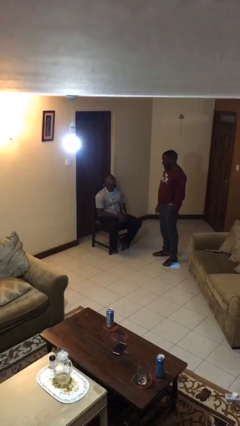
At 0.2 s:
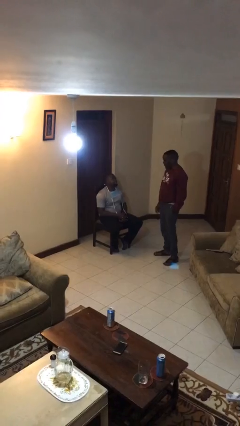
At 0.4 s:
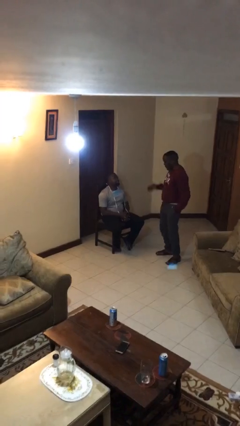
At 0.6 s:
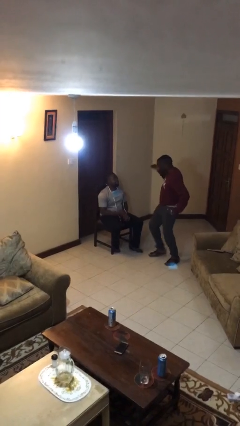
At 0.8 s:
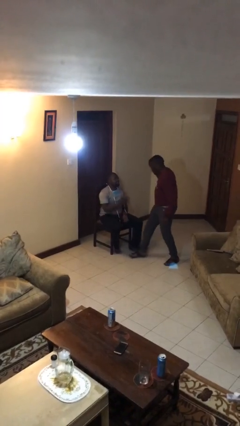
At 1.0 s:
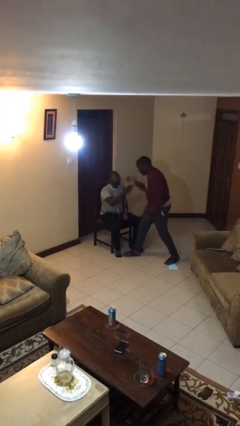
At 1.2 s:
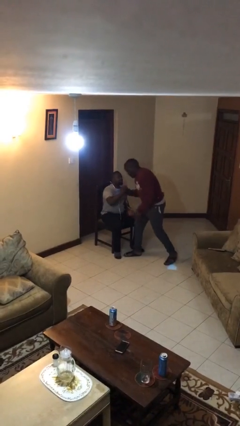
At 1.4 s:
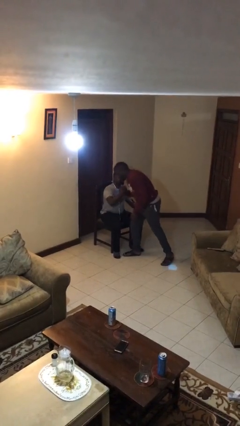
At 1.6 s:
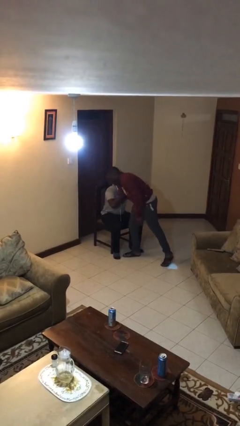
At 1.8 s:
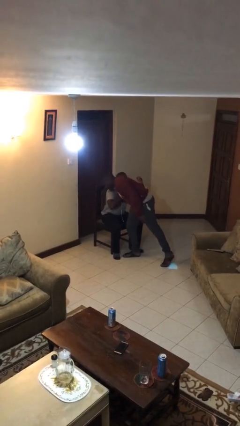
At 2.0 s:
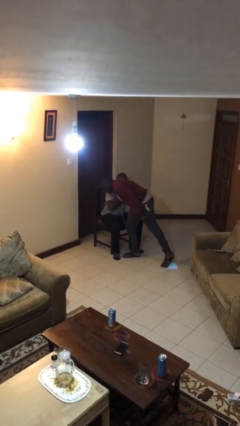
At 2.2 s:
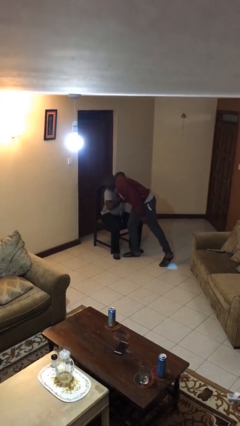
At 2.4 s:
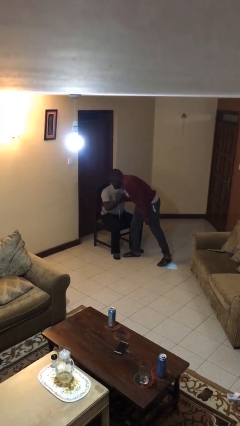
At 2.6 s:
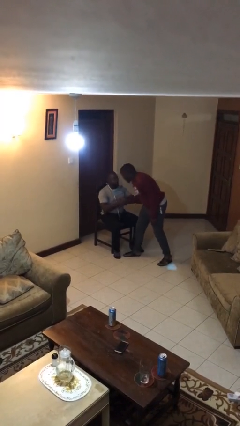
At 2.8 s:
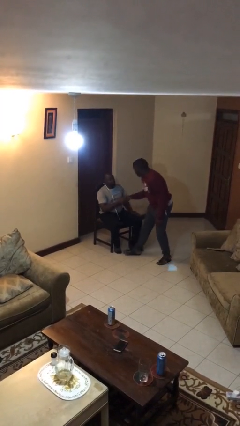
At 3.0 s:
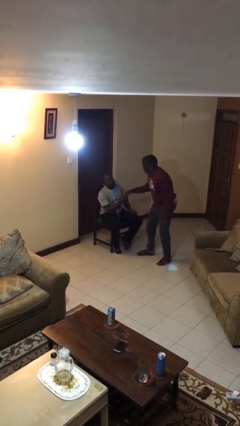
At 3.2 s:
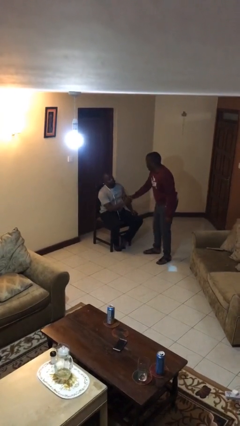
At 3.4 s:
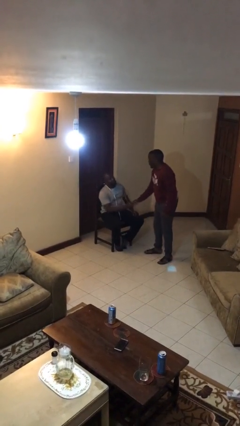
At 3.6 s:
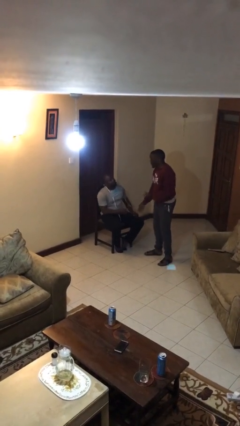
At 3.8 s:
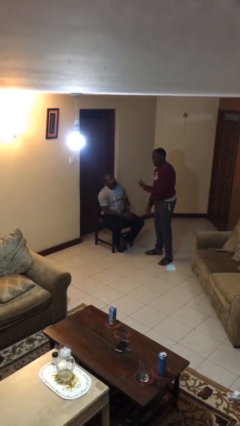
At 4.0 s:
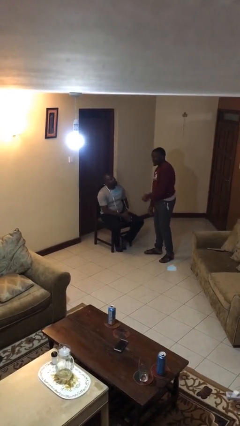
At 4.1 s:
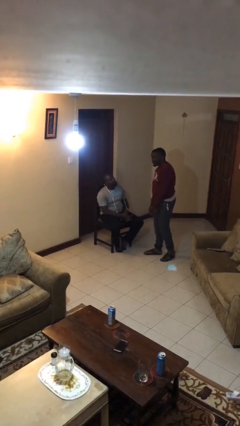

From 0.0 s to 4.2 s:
person embraces person

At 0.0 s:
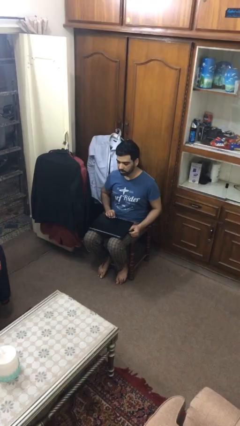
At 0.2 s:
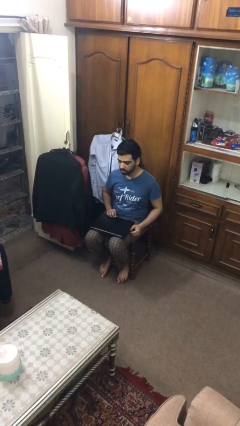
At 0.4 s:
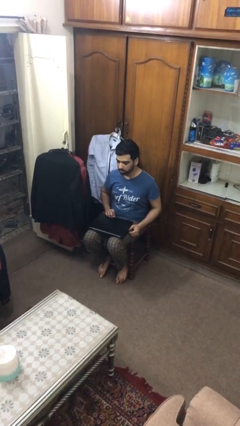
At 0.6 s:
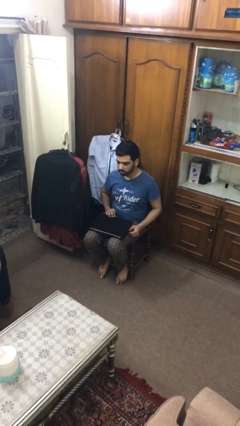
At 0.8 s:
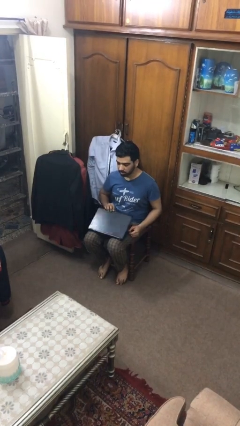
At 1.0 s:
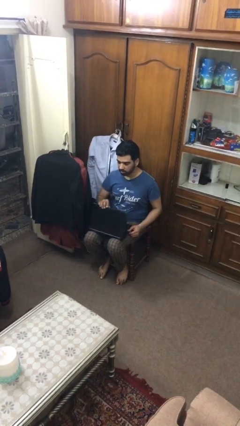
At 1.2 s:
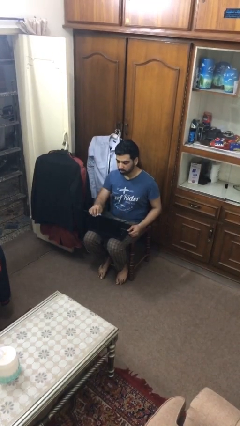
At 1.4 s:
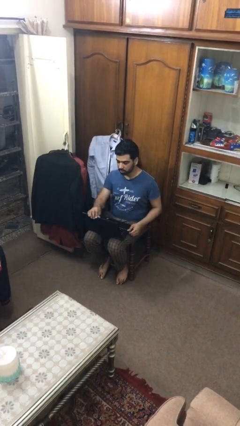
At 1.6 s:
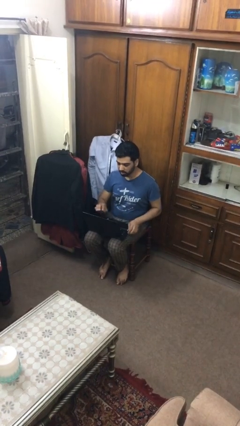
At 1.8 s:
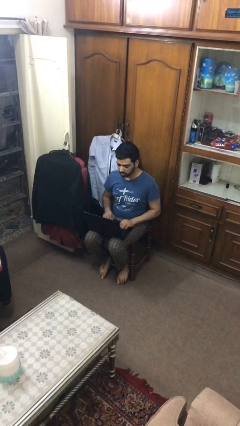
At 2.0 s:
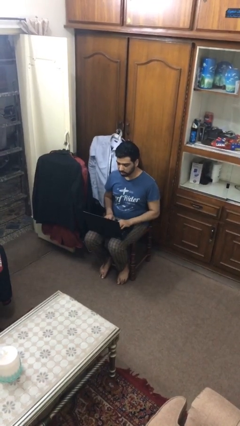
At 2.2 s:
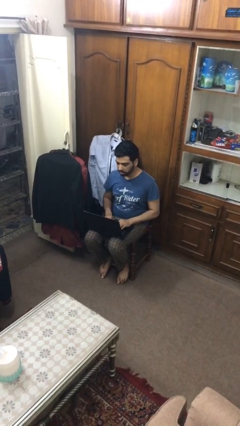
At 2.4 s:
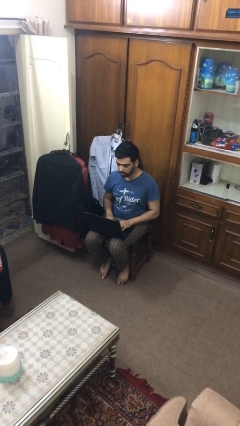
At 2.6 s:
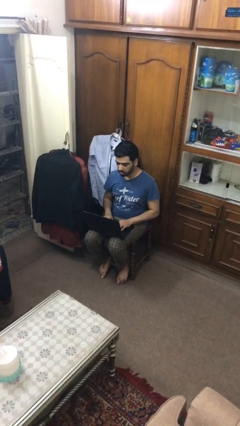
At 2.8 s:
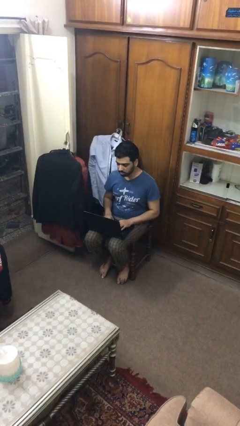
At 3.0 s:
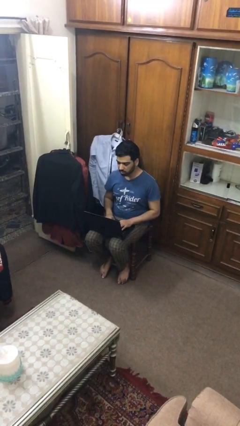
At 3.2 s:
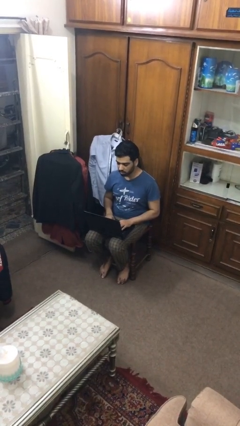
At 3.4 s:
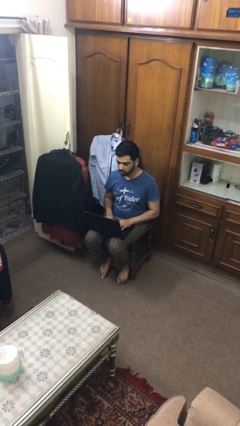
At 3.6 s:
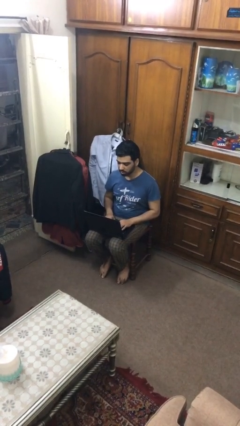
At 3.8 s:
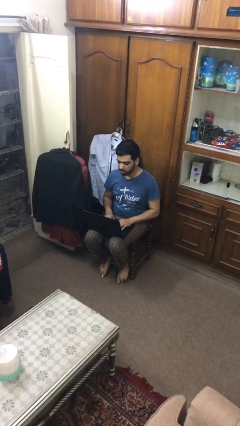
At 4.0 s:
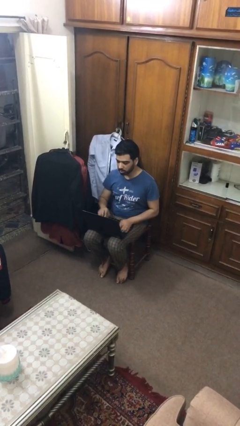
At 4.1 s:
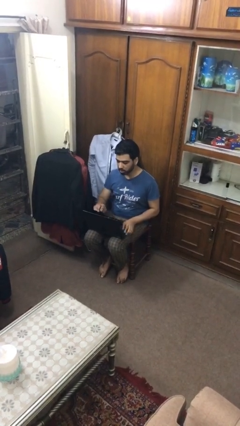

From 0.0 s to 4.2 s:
person interacts with laptop

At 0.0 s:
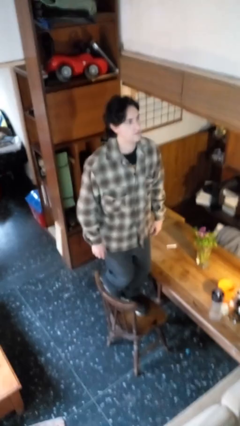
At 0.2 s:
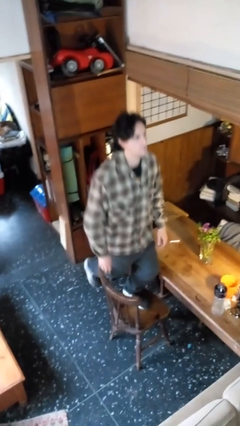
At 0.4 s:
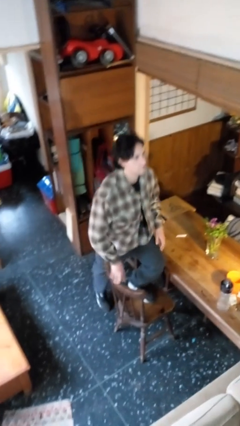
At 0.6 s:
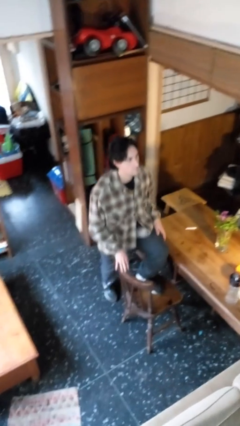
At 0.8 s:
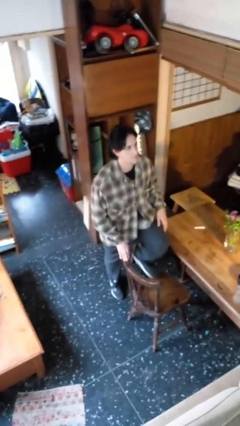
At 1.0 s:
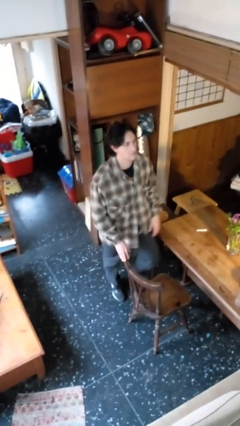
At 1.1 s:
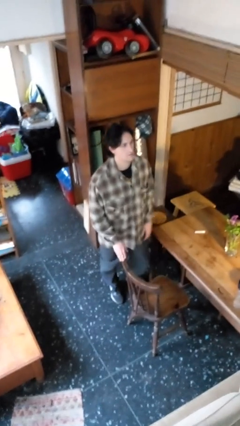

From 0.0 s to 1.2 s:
person climbs off chair

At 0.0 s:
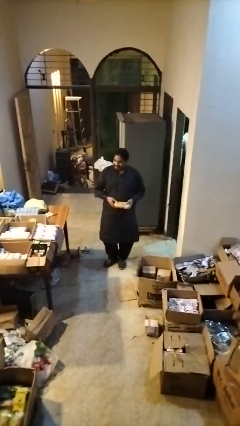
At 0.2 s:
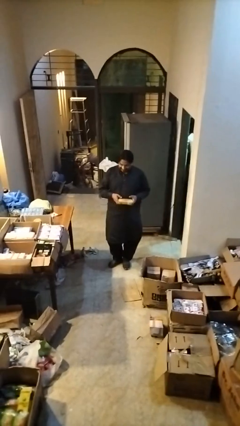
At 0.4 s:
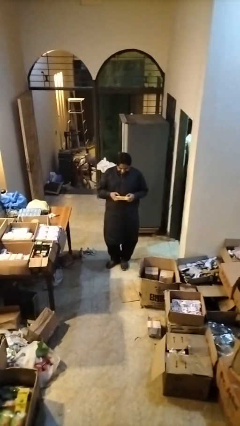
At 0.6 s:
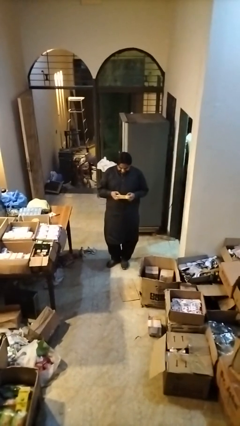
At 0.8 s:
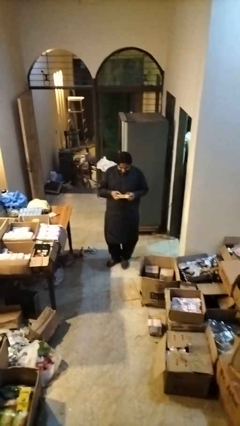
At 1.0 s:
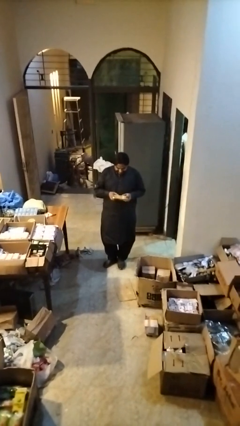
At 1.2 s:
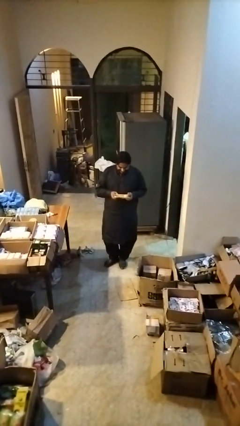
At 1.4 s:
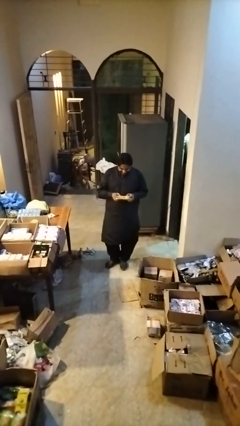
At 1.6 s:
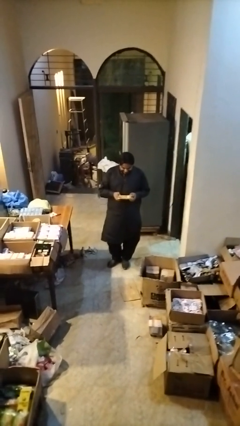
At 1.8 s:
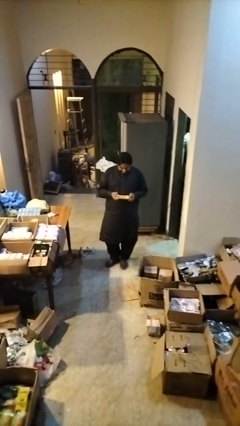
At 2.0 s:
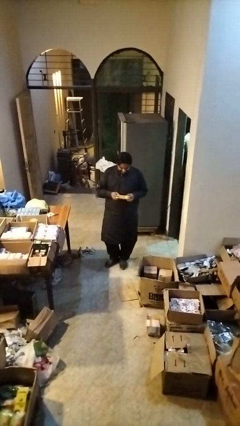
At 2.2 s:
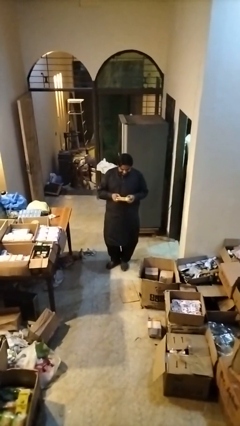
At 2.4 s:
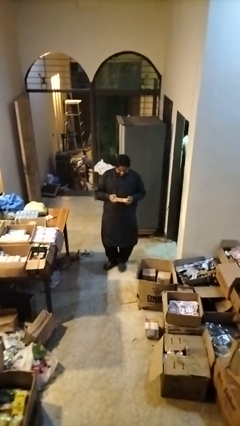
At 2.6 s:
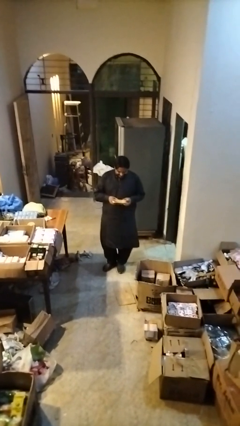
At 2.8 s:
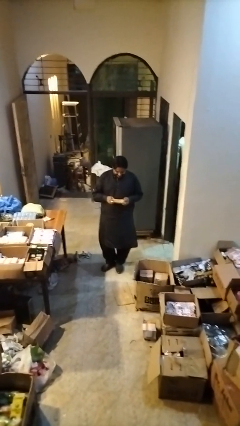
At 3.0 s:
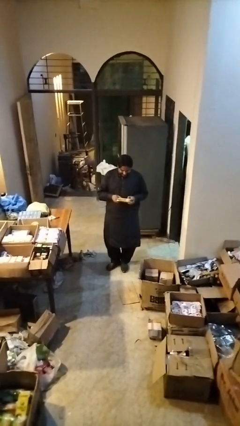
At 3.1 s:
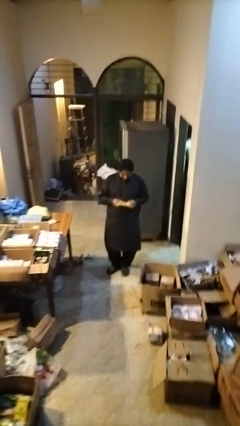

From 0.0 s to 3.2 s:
person interacts with handheld game

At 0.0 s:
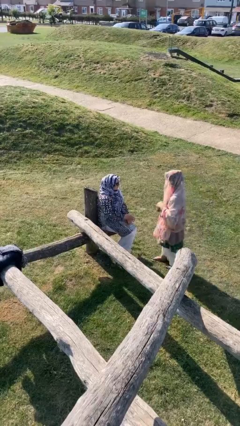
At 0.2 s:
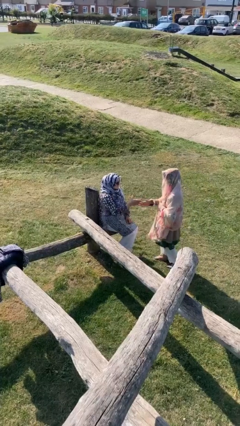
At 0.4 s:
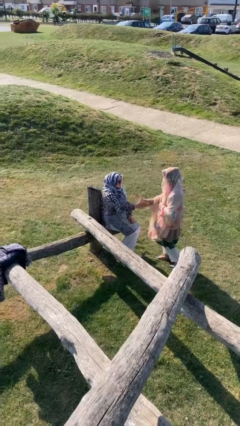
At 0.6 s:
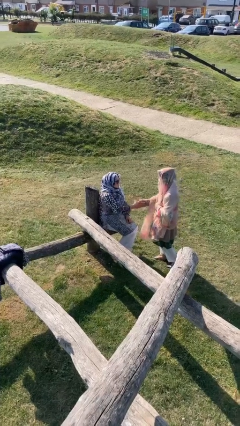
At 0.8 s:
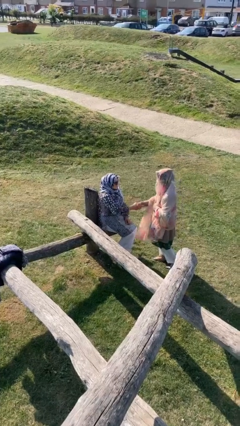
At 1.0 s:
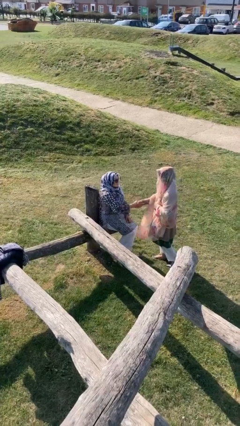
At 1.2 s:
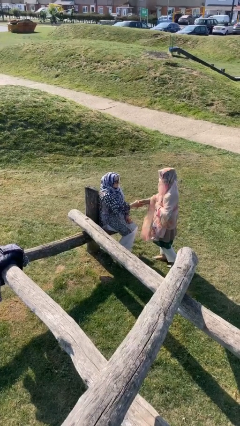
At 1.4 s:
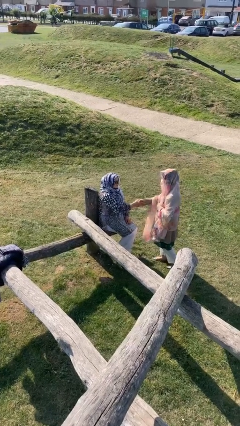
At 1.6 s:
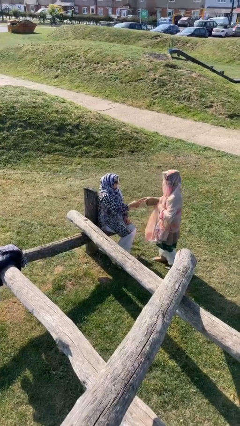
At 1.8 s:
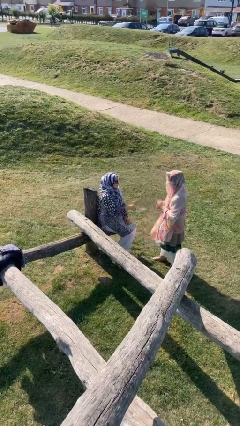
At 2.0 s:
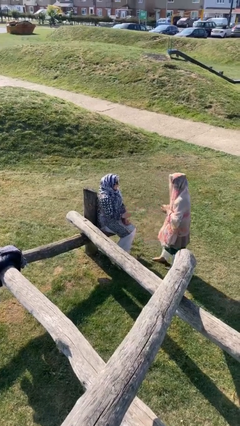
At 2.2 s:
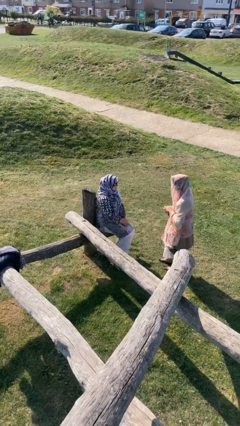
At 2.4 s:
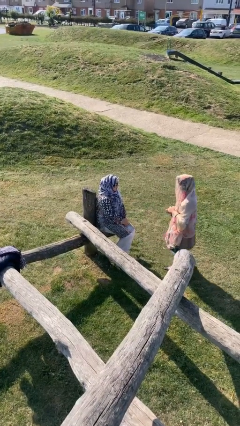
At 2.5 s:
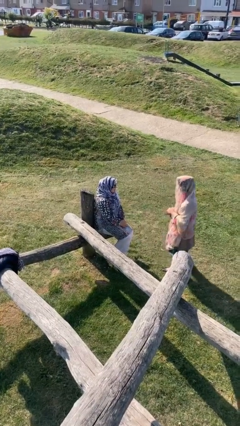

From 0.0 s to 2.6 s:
person shakes hand

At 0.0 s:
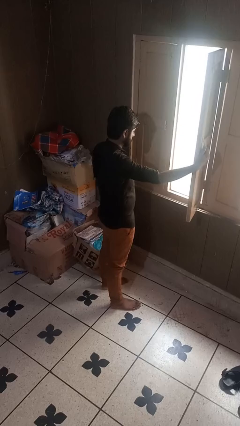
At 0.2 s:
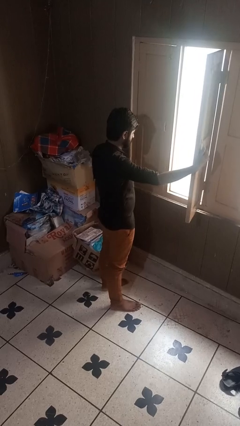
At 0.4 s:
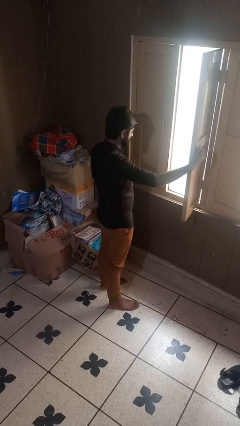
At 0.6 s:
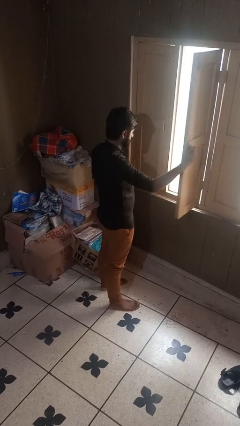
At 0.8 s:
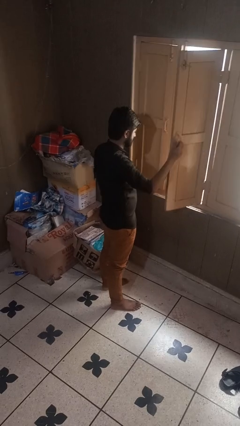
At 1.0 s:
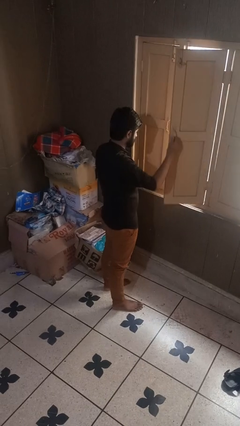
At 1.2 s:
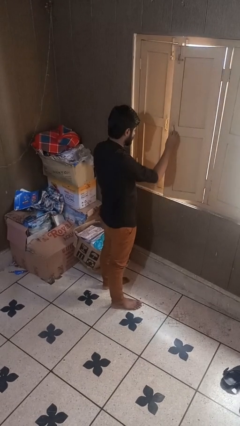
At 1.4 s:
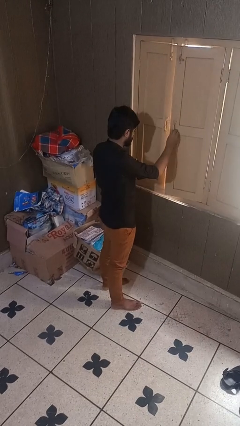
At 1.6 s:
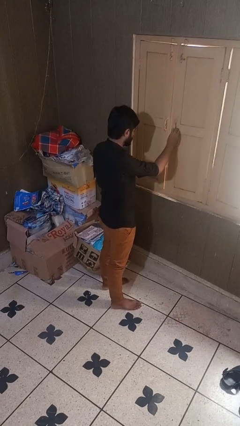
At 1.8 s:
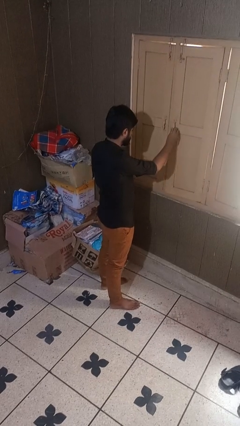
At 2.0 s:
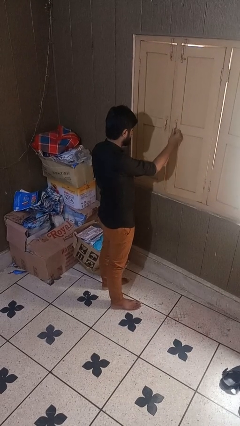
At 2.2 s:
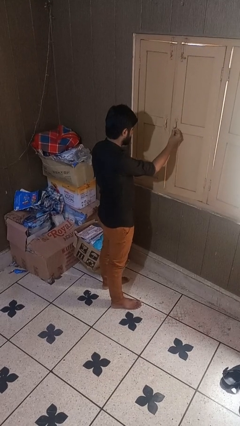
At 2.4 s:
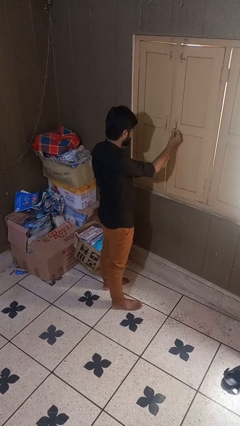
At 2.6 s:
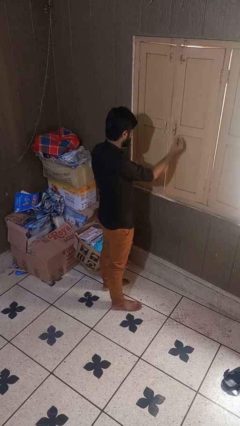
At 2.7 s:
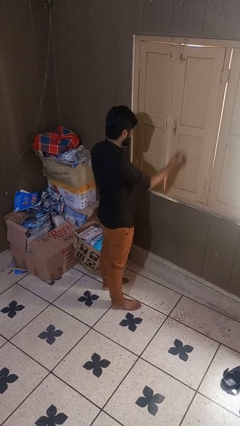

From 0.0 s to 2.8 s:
person closes home window
